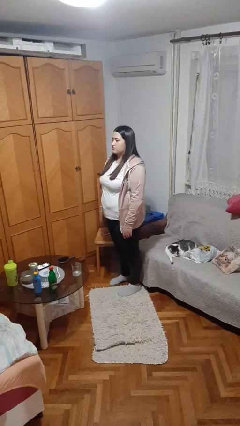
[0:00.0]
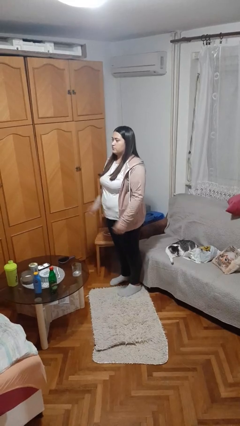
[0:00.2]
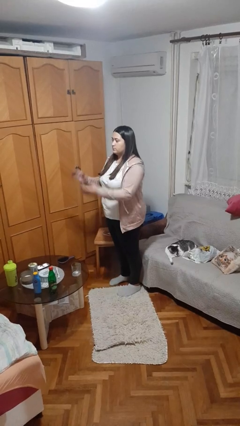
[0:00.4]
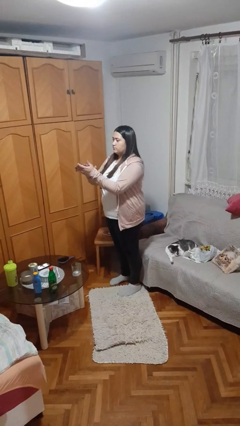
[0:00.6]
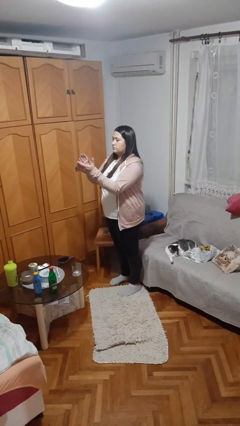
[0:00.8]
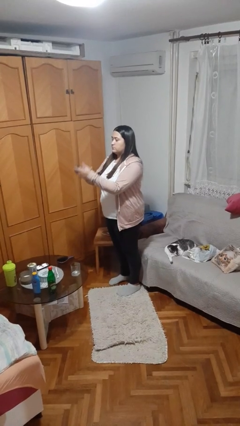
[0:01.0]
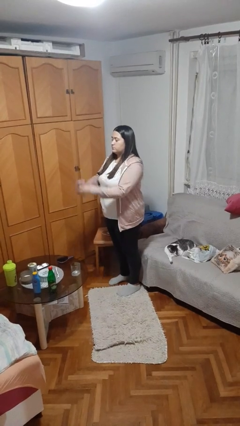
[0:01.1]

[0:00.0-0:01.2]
person claps hands

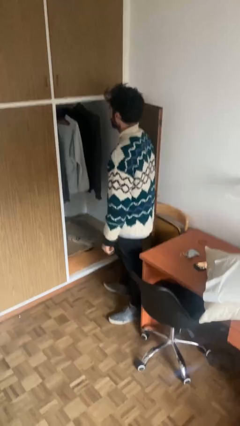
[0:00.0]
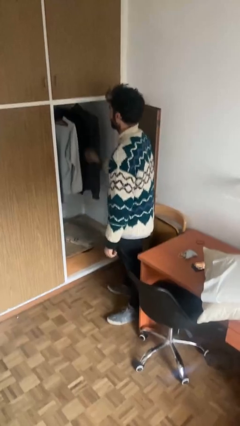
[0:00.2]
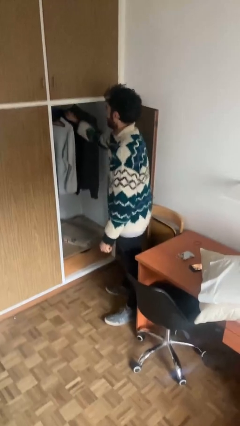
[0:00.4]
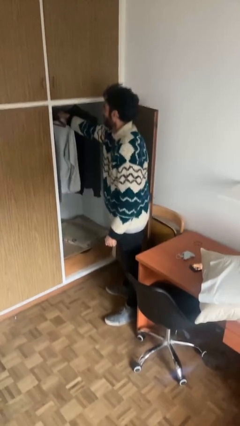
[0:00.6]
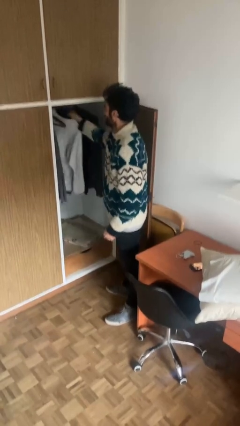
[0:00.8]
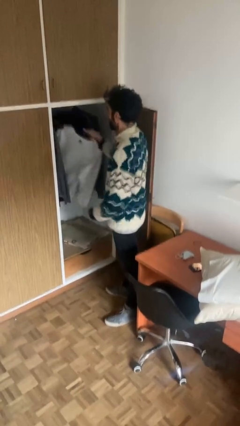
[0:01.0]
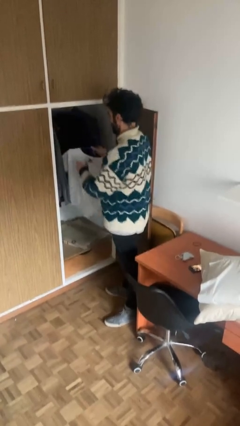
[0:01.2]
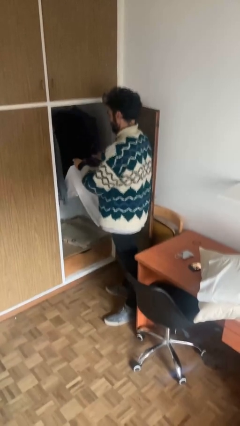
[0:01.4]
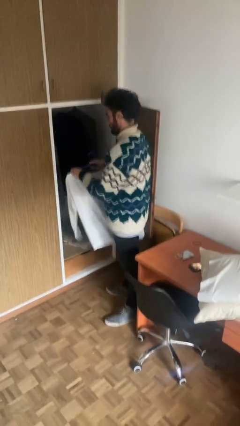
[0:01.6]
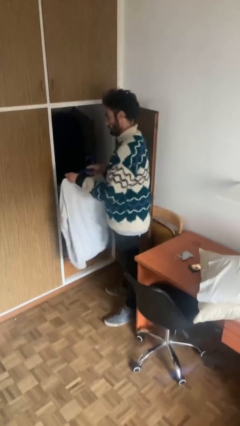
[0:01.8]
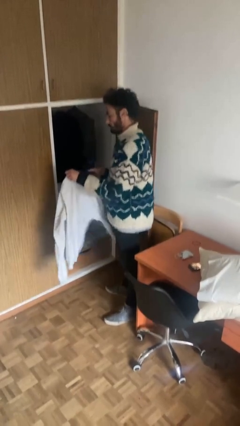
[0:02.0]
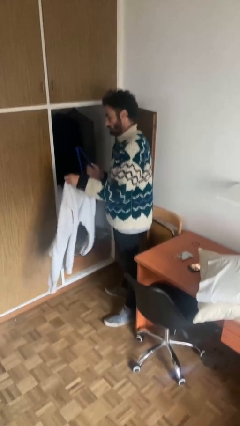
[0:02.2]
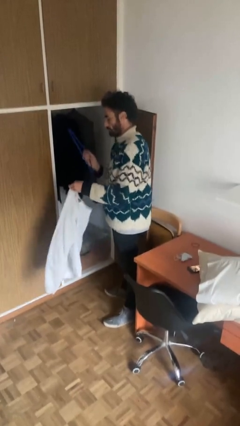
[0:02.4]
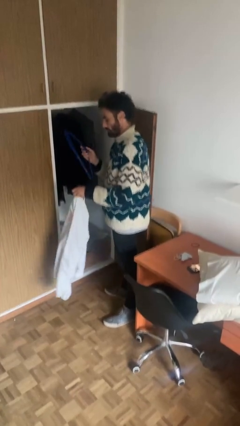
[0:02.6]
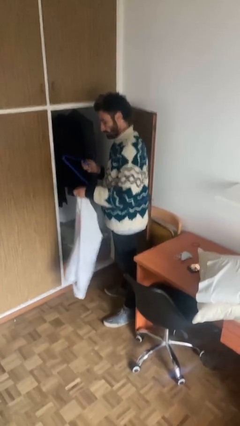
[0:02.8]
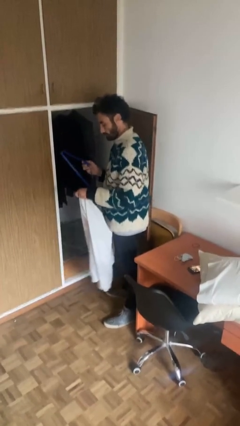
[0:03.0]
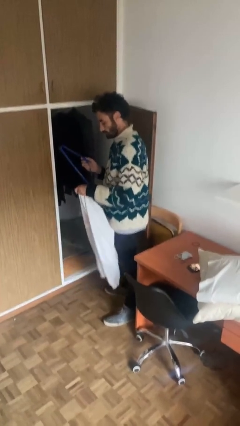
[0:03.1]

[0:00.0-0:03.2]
person takes clothes from closet

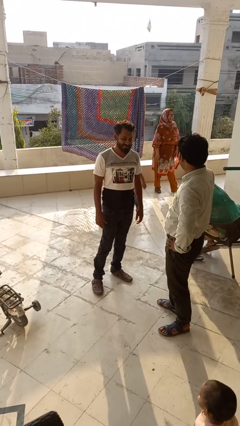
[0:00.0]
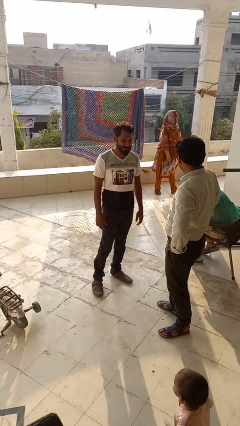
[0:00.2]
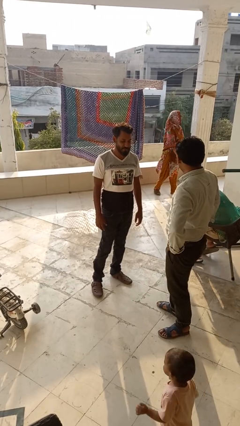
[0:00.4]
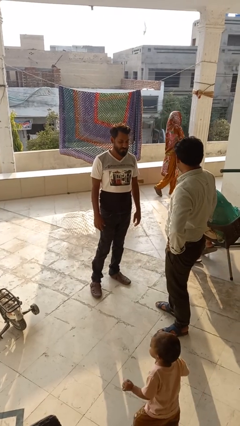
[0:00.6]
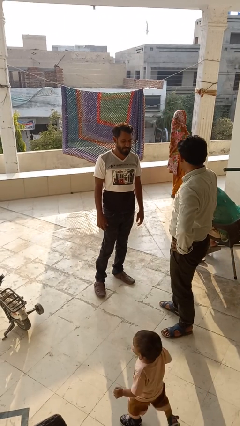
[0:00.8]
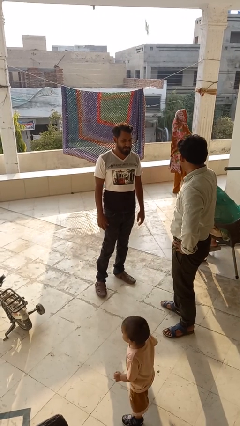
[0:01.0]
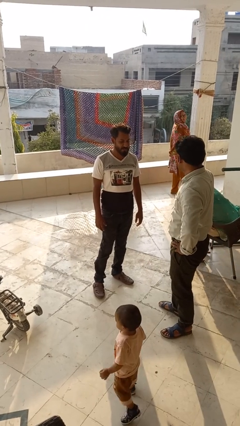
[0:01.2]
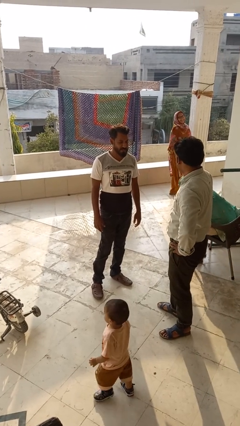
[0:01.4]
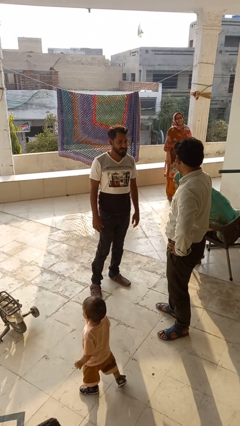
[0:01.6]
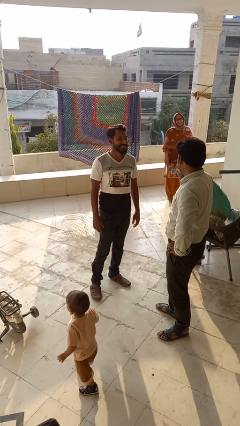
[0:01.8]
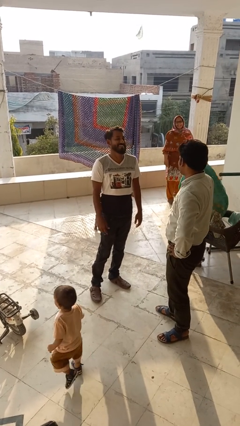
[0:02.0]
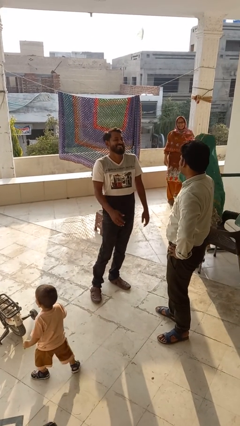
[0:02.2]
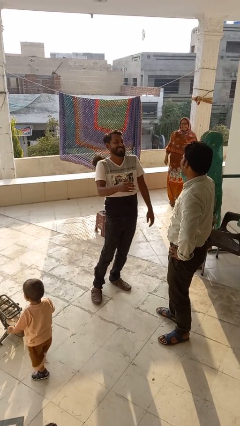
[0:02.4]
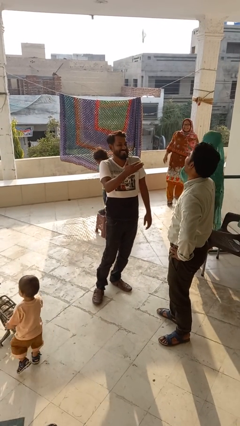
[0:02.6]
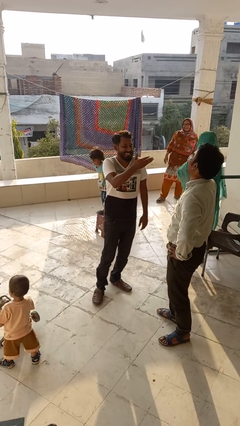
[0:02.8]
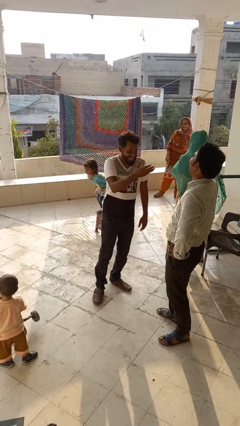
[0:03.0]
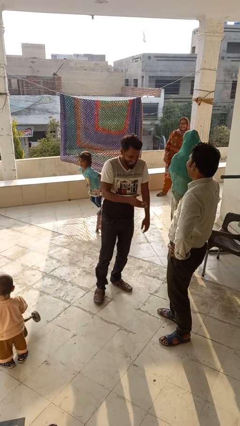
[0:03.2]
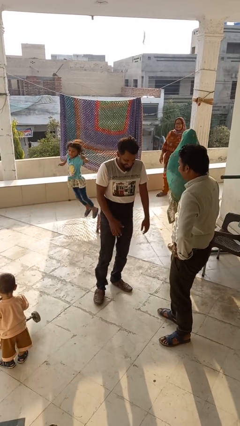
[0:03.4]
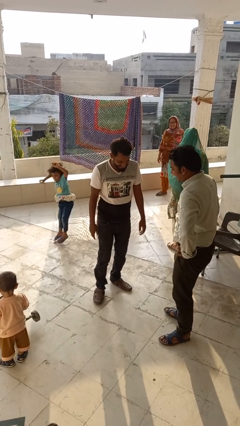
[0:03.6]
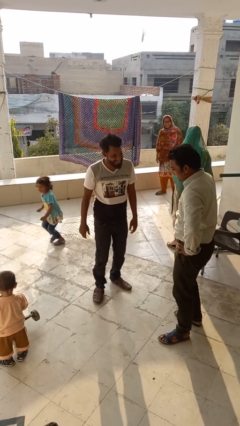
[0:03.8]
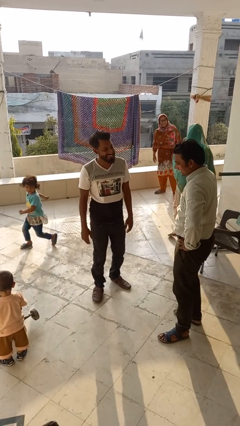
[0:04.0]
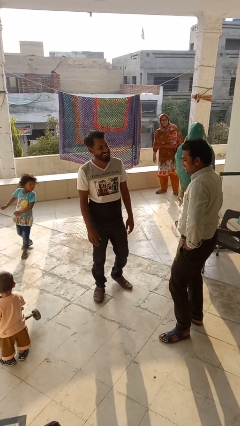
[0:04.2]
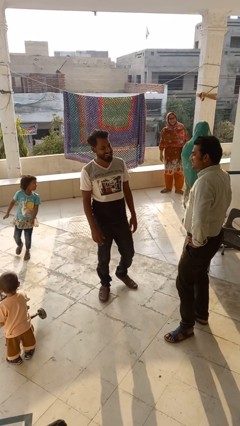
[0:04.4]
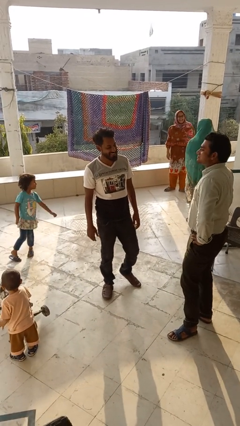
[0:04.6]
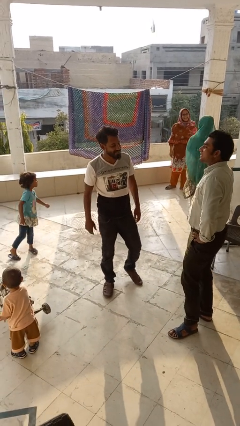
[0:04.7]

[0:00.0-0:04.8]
person laughs with person

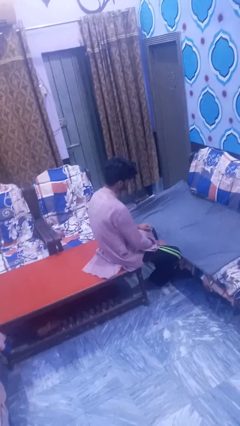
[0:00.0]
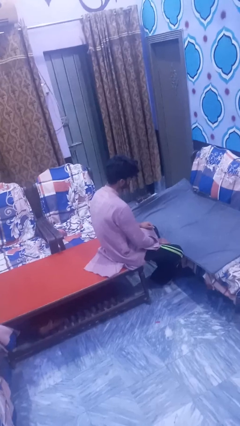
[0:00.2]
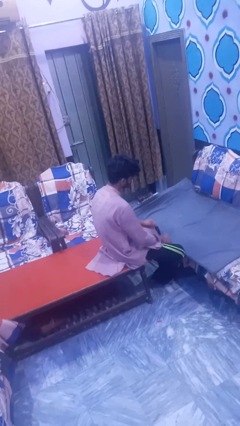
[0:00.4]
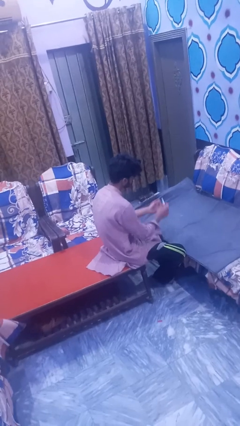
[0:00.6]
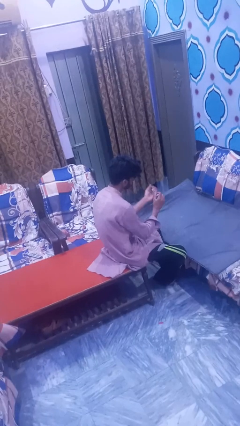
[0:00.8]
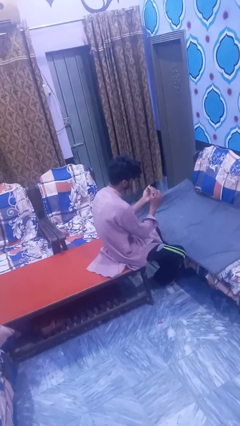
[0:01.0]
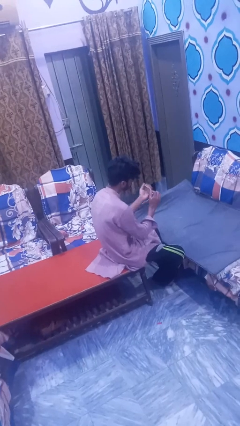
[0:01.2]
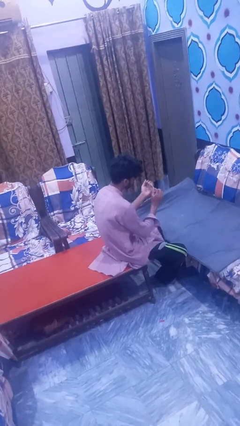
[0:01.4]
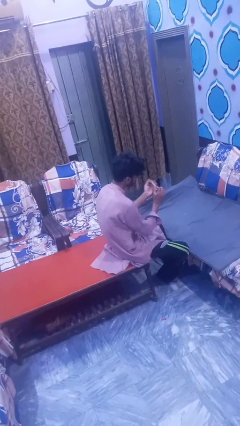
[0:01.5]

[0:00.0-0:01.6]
person files fingernails

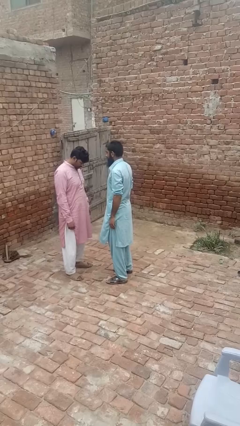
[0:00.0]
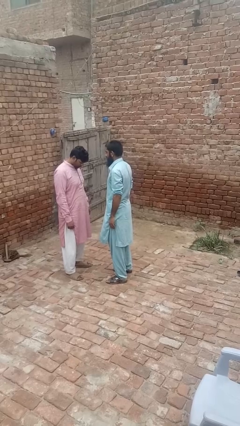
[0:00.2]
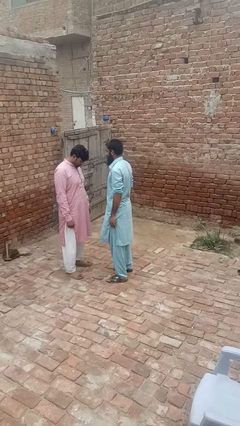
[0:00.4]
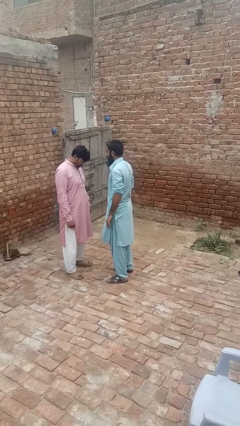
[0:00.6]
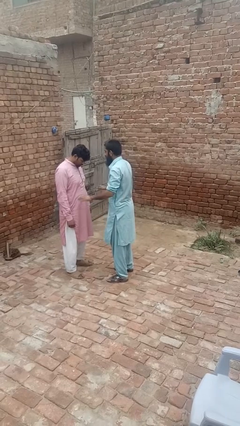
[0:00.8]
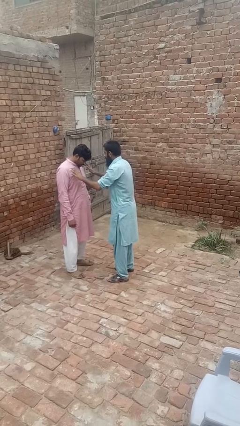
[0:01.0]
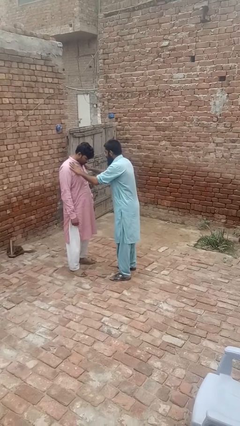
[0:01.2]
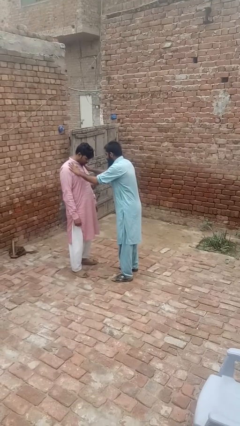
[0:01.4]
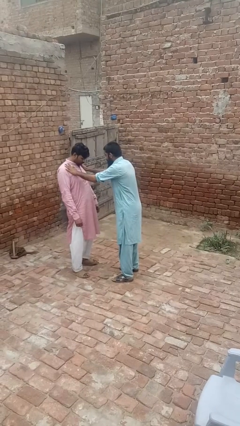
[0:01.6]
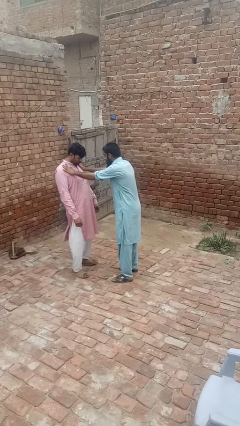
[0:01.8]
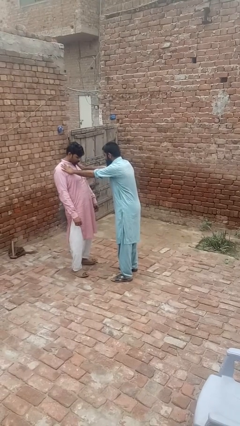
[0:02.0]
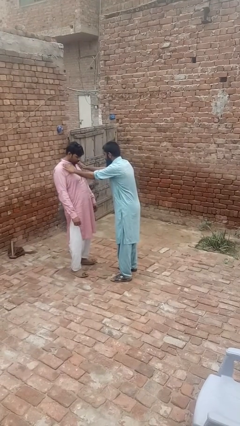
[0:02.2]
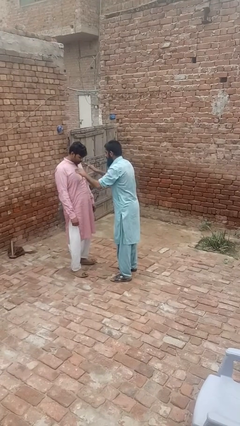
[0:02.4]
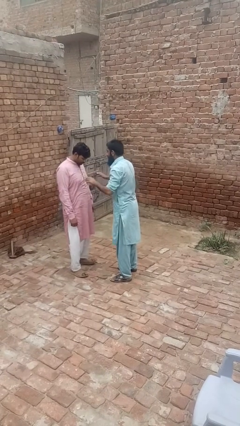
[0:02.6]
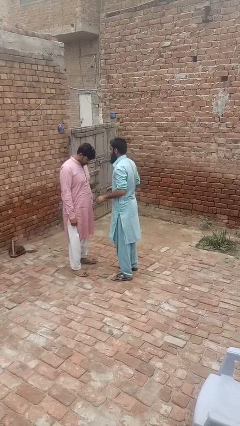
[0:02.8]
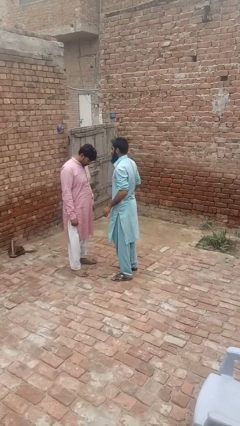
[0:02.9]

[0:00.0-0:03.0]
person shoves person

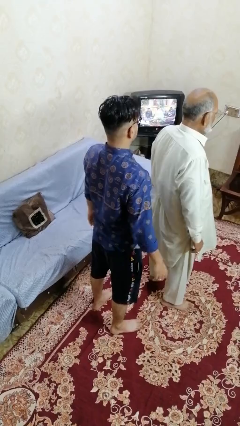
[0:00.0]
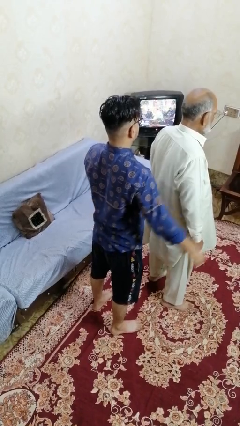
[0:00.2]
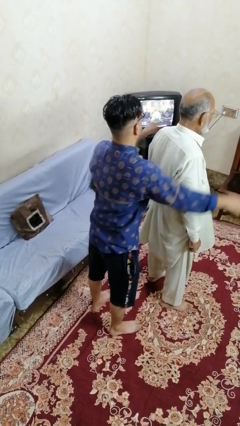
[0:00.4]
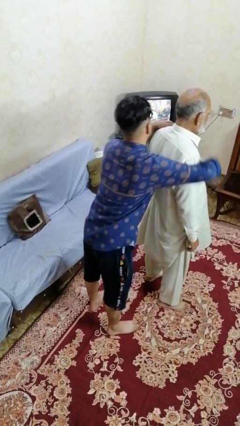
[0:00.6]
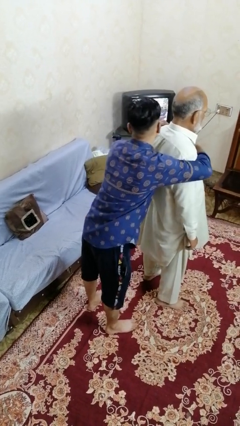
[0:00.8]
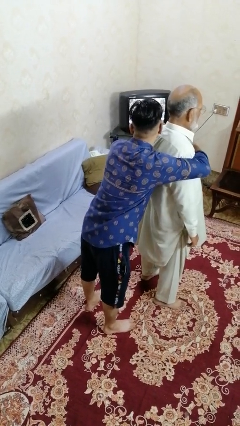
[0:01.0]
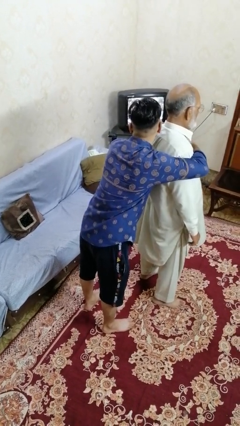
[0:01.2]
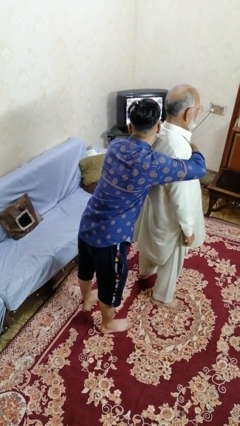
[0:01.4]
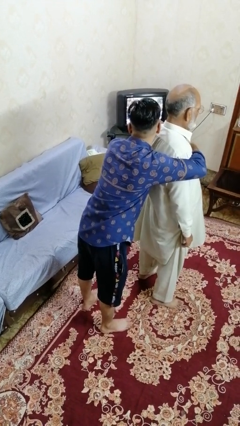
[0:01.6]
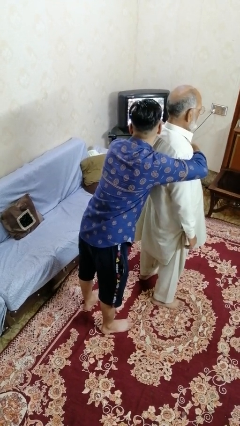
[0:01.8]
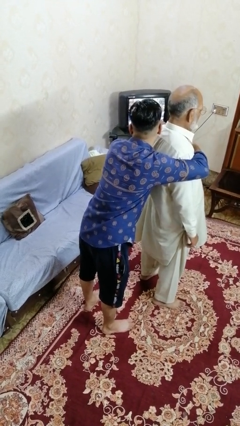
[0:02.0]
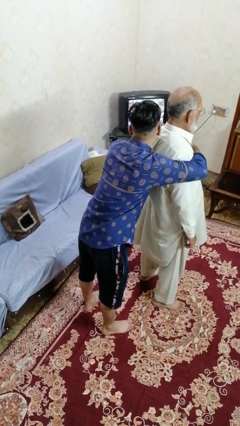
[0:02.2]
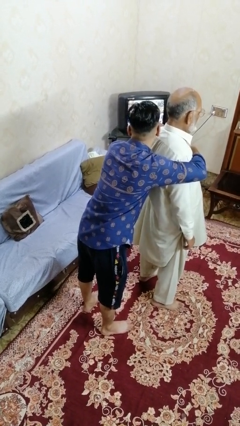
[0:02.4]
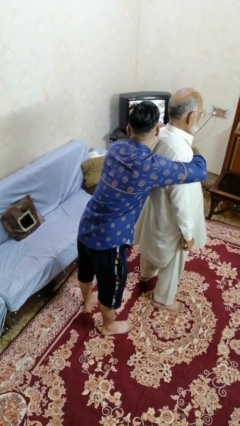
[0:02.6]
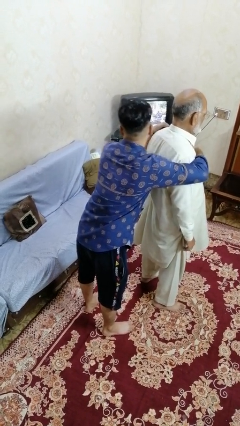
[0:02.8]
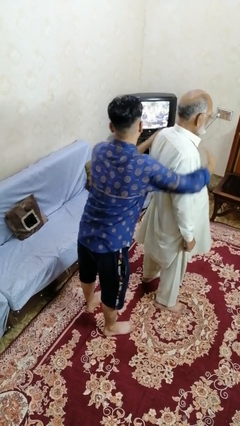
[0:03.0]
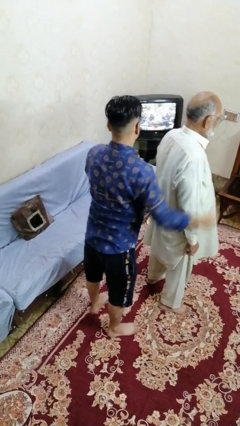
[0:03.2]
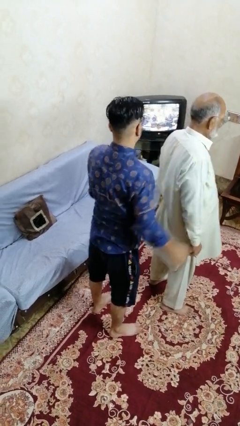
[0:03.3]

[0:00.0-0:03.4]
person hugs person from behind

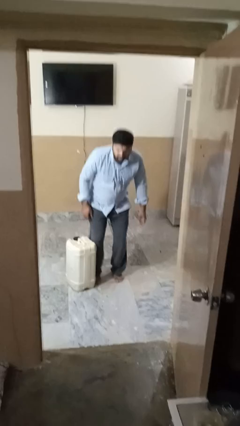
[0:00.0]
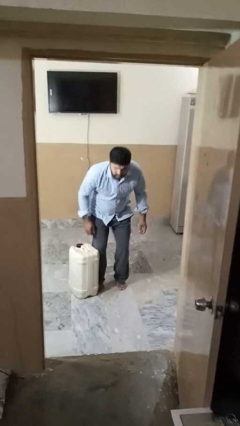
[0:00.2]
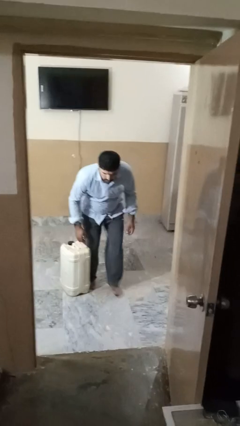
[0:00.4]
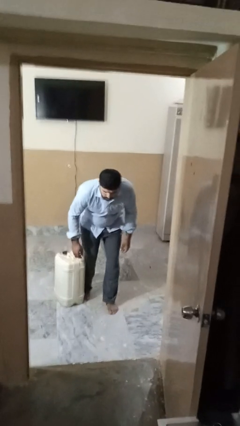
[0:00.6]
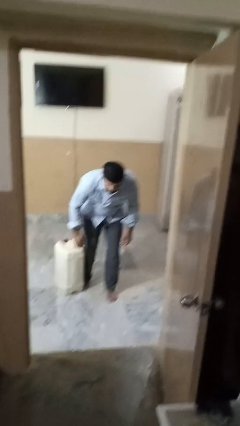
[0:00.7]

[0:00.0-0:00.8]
person trips on object on floor
